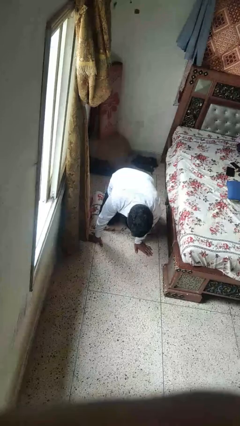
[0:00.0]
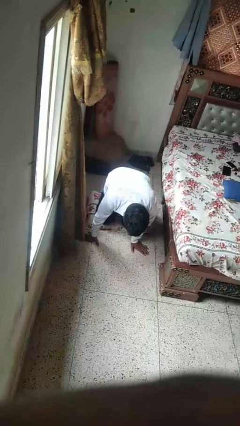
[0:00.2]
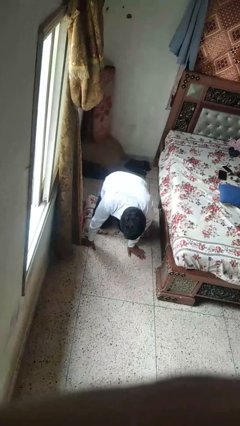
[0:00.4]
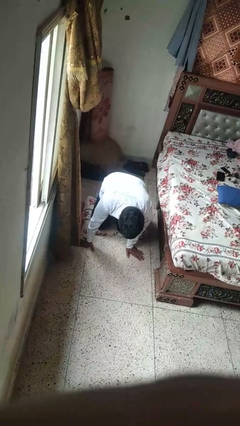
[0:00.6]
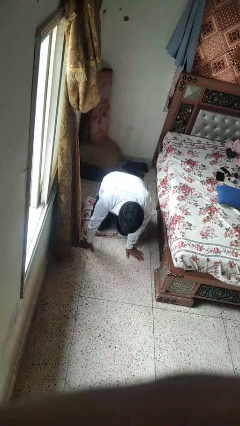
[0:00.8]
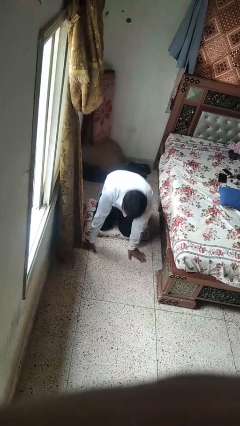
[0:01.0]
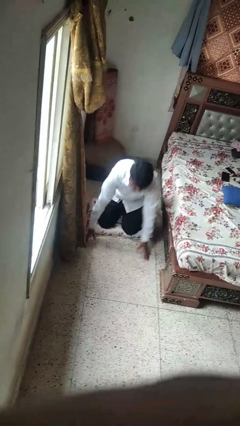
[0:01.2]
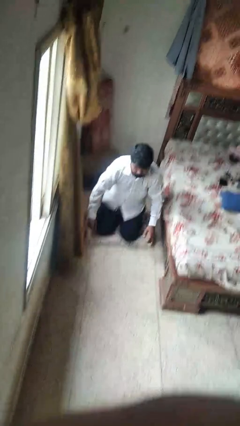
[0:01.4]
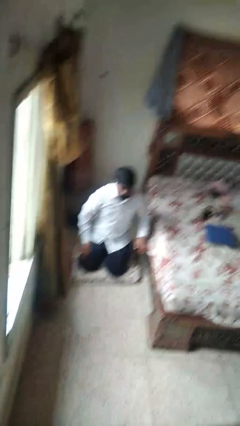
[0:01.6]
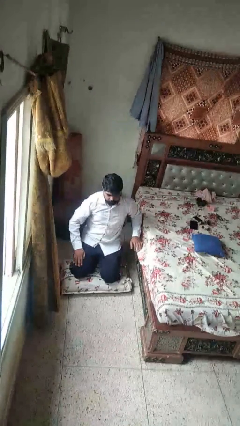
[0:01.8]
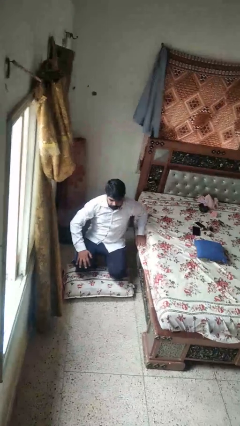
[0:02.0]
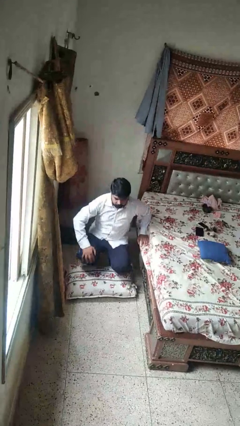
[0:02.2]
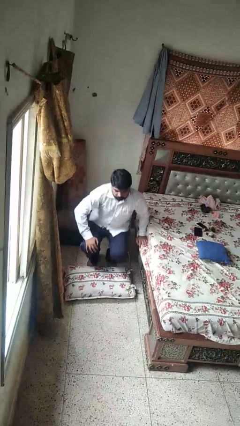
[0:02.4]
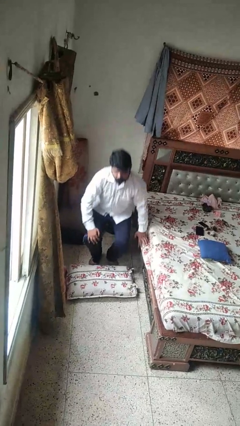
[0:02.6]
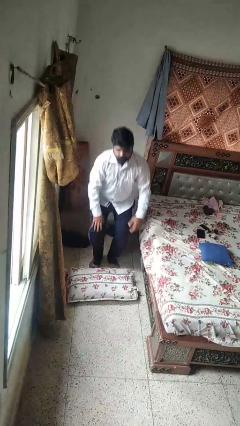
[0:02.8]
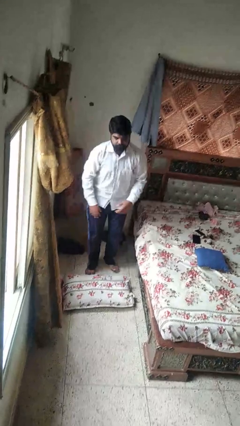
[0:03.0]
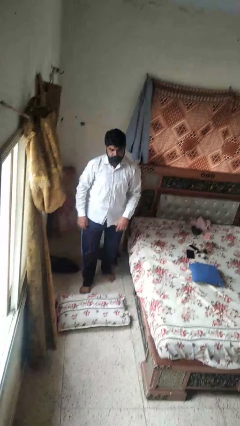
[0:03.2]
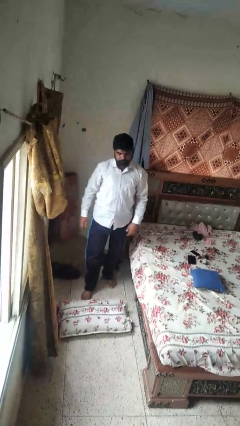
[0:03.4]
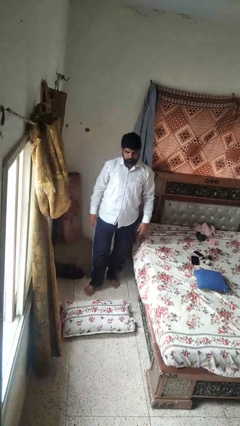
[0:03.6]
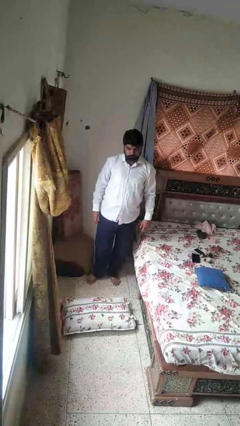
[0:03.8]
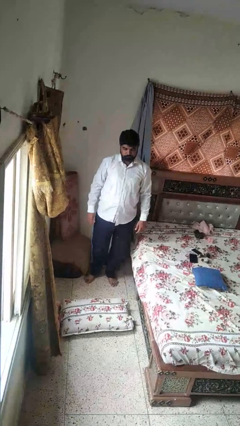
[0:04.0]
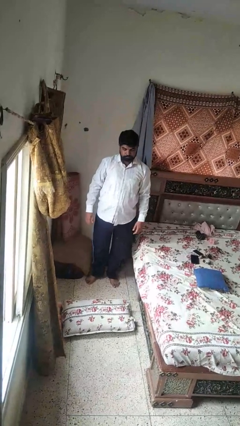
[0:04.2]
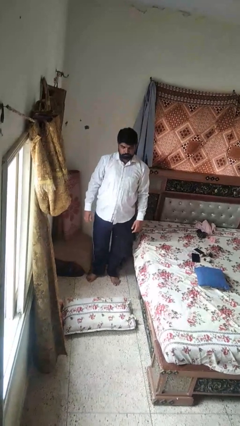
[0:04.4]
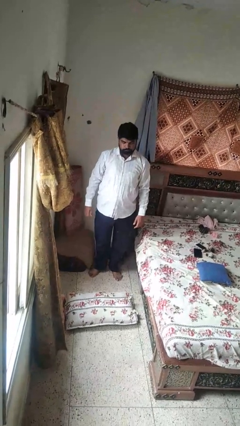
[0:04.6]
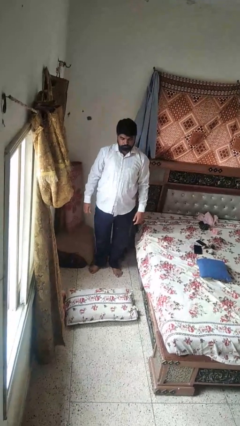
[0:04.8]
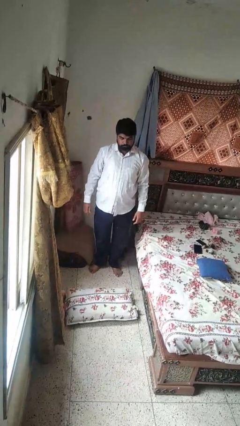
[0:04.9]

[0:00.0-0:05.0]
person stands up from floor

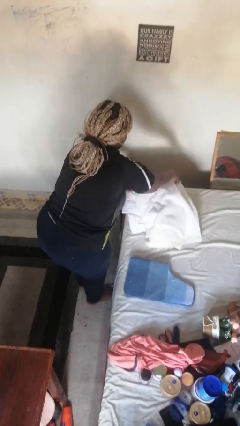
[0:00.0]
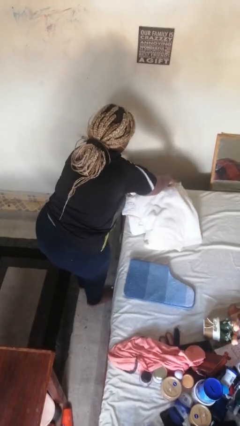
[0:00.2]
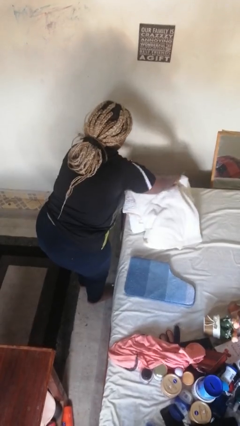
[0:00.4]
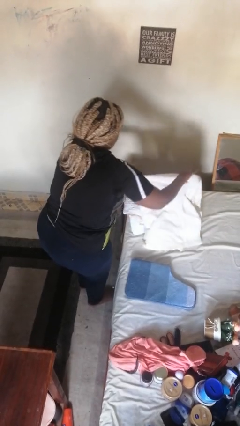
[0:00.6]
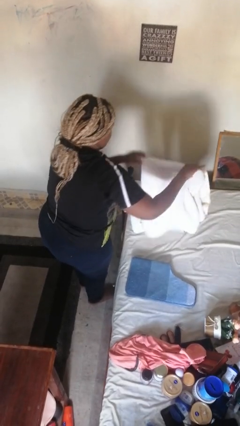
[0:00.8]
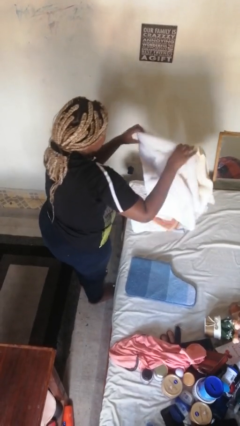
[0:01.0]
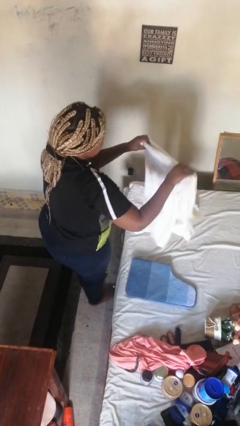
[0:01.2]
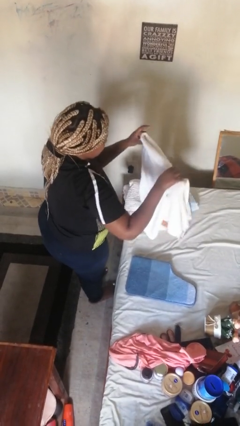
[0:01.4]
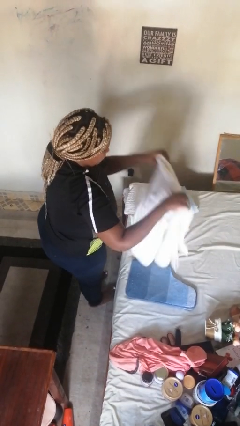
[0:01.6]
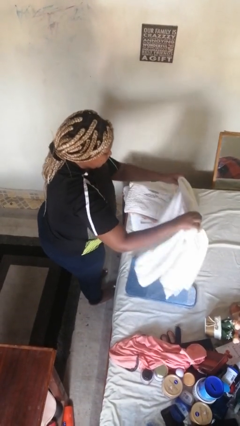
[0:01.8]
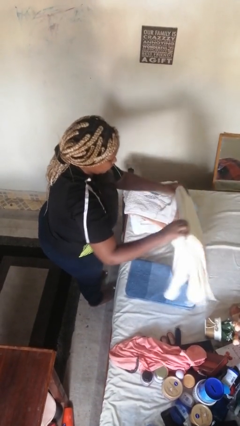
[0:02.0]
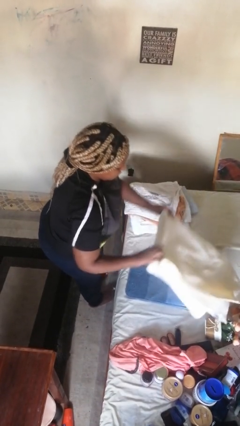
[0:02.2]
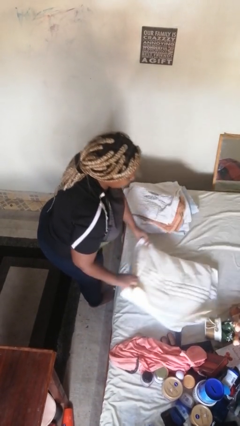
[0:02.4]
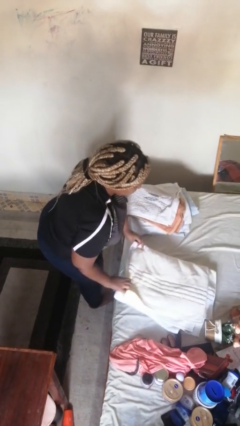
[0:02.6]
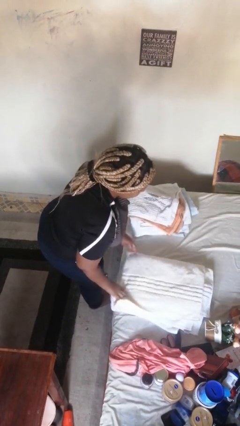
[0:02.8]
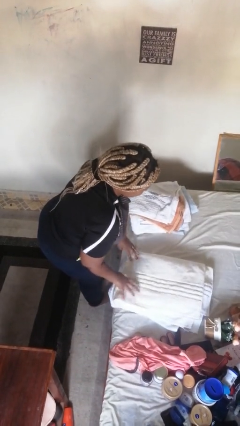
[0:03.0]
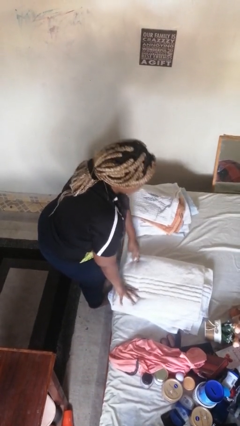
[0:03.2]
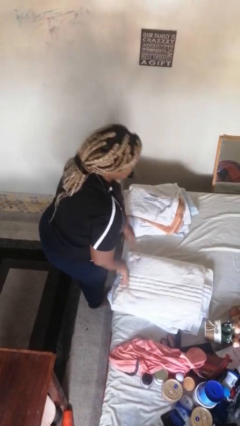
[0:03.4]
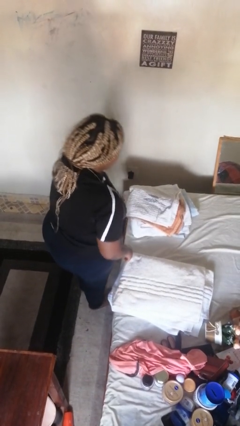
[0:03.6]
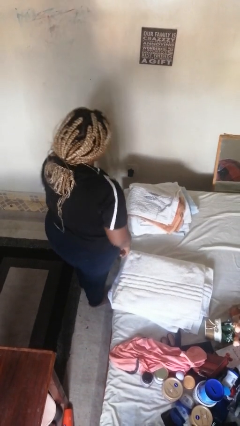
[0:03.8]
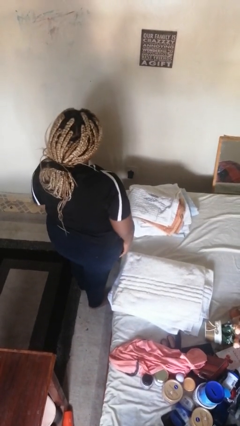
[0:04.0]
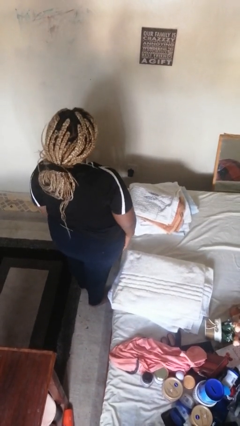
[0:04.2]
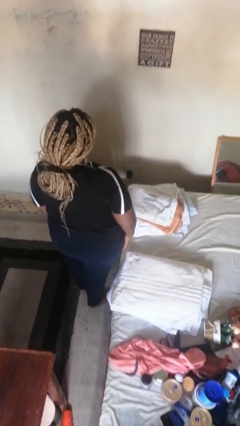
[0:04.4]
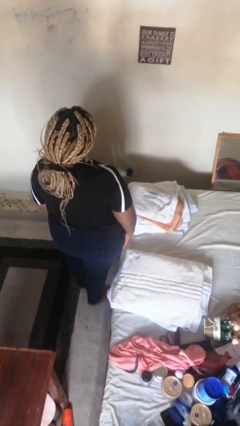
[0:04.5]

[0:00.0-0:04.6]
person folds towel

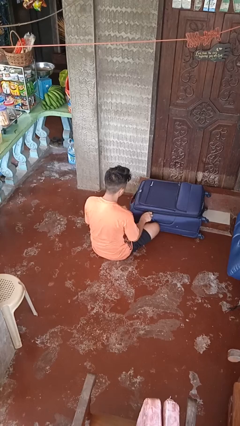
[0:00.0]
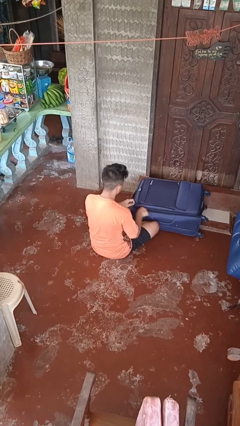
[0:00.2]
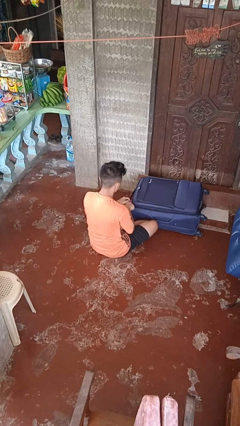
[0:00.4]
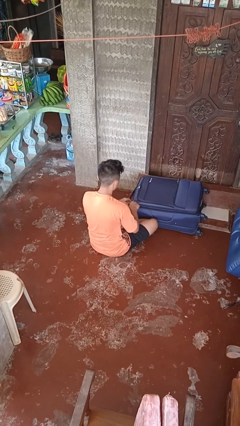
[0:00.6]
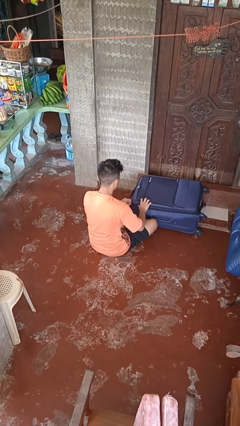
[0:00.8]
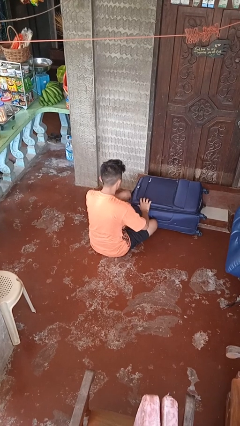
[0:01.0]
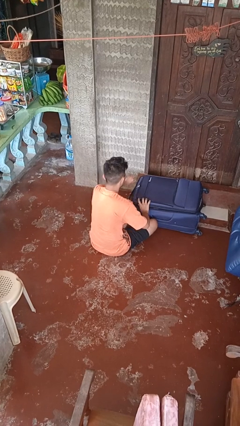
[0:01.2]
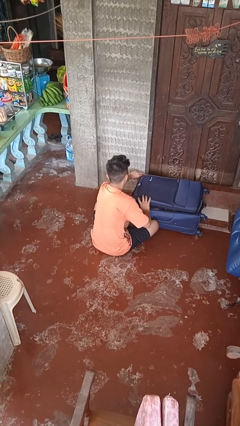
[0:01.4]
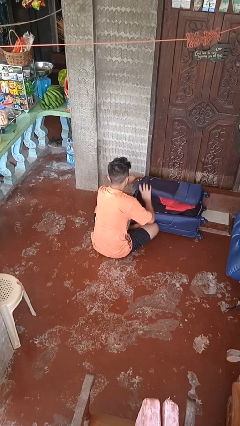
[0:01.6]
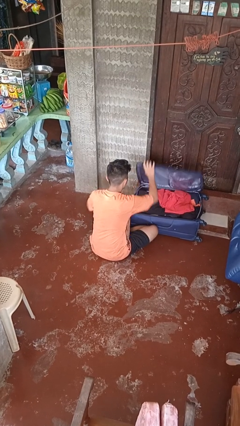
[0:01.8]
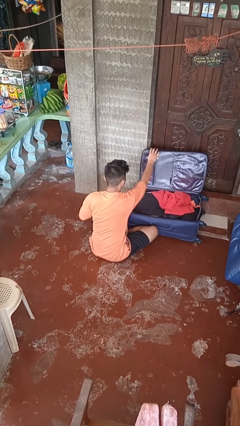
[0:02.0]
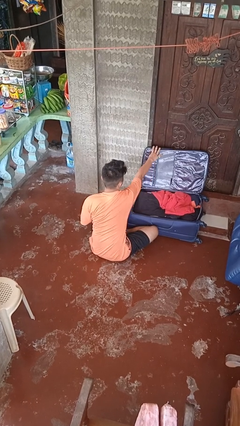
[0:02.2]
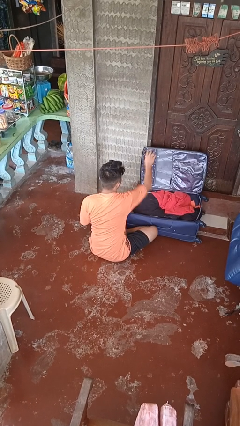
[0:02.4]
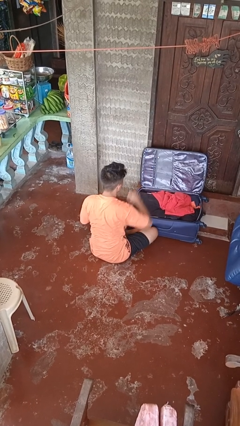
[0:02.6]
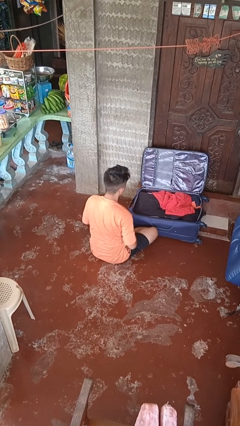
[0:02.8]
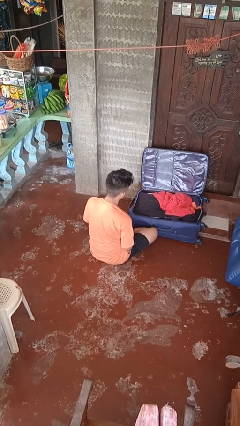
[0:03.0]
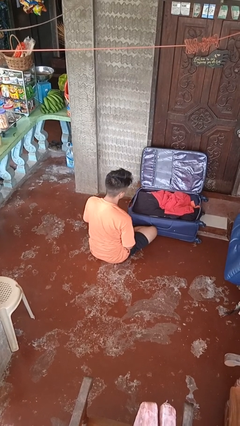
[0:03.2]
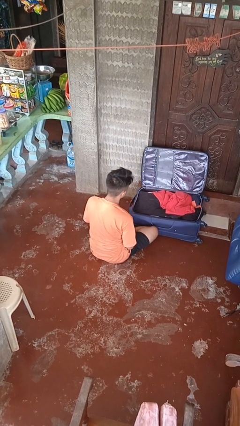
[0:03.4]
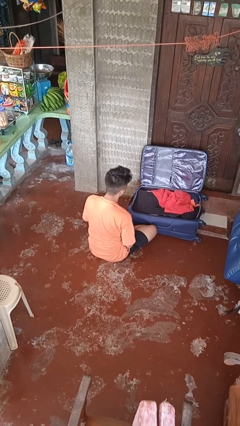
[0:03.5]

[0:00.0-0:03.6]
person opens suitcase

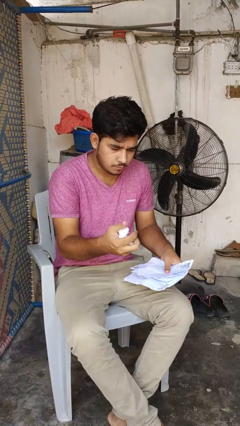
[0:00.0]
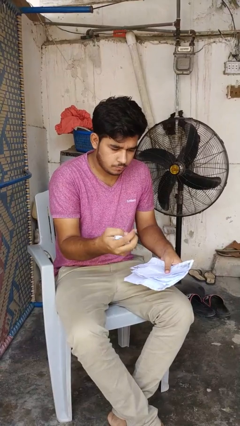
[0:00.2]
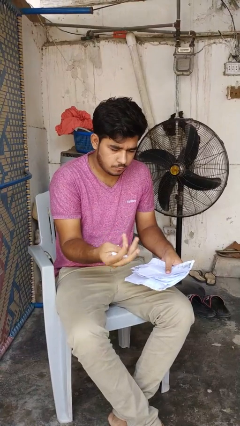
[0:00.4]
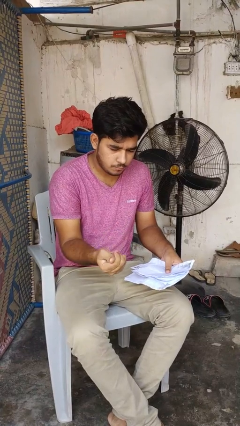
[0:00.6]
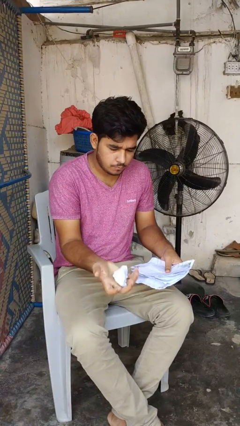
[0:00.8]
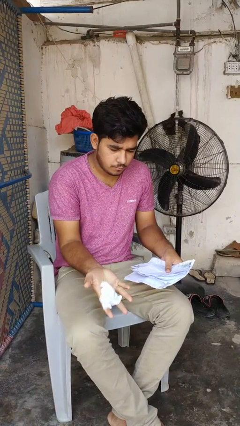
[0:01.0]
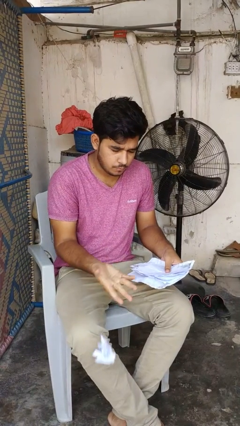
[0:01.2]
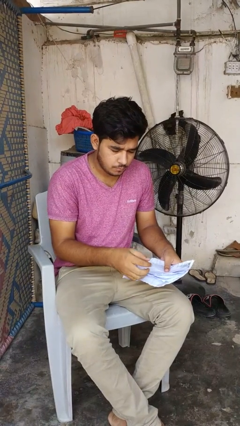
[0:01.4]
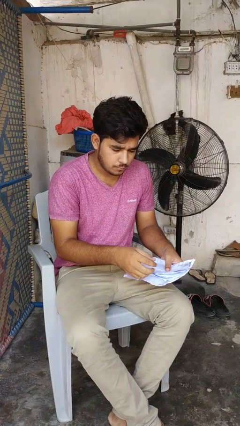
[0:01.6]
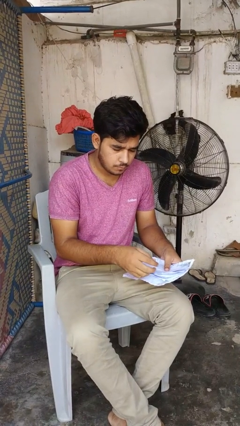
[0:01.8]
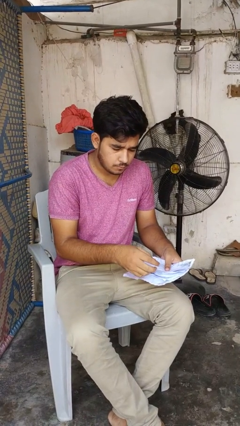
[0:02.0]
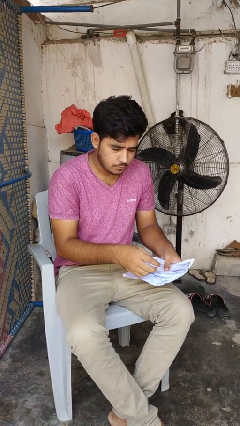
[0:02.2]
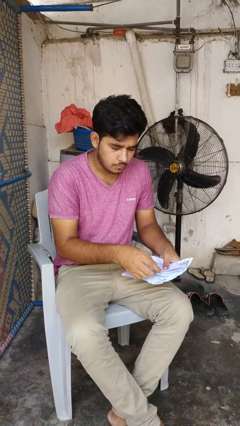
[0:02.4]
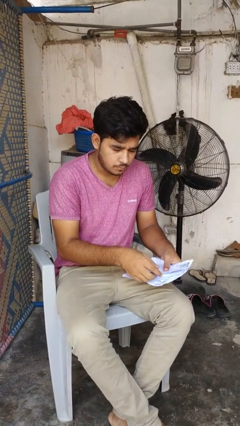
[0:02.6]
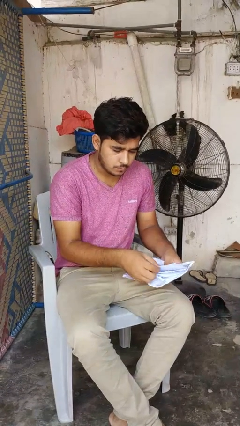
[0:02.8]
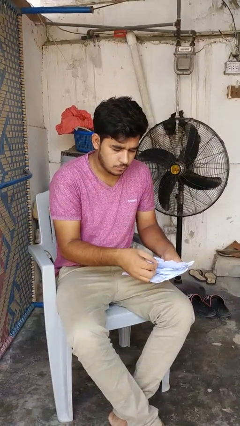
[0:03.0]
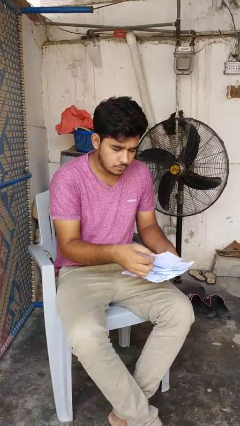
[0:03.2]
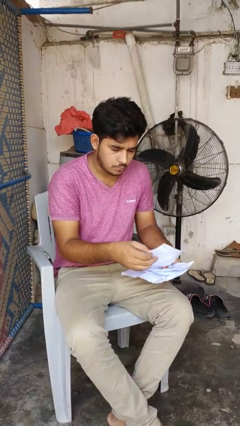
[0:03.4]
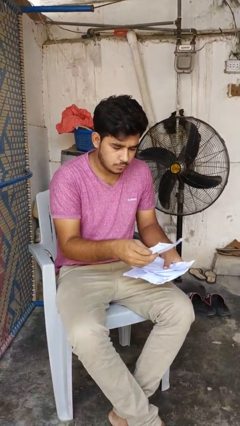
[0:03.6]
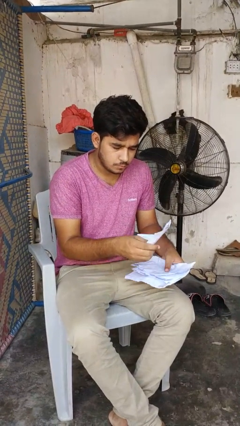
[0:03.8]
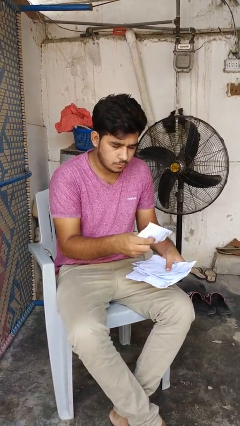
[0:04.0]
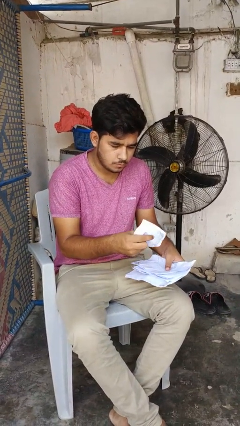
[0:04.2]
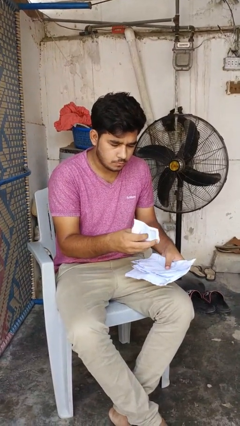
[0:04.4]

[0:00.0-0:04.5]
person crumples paper
